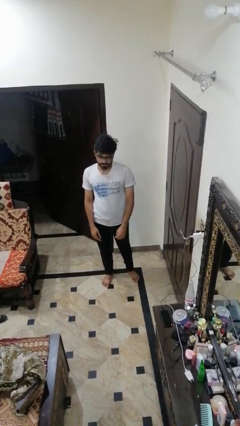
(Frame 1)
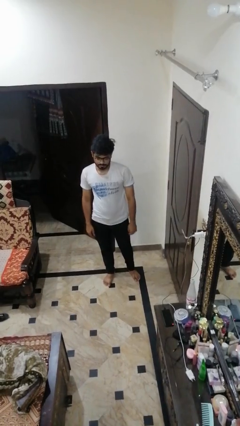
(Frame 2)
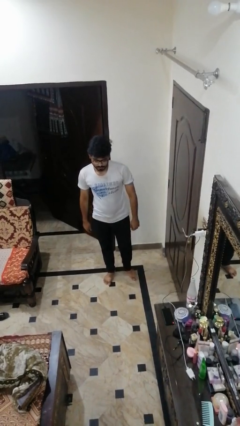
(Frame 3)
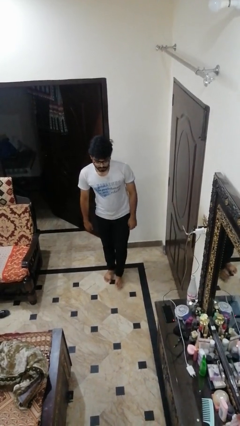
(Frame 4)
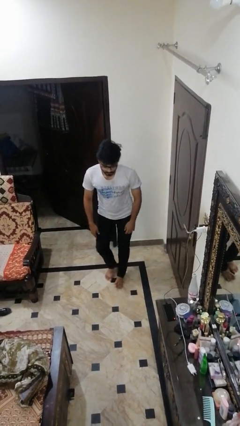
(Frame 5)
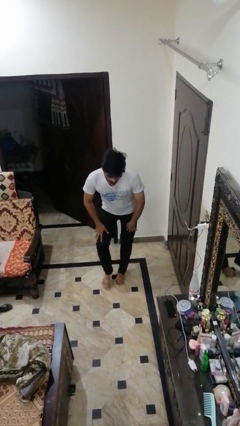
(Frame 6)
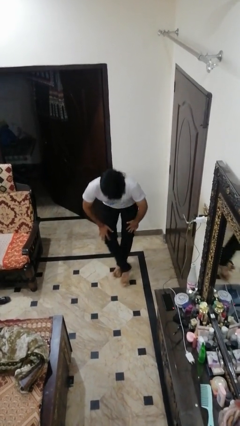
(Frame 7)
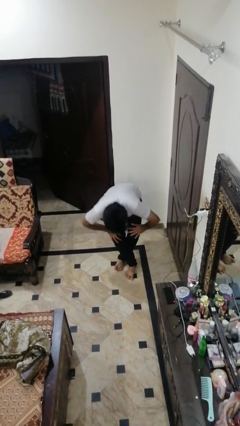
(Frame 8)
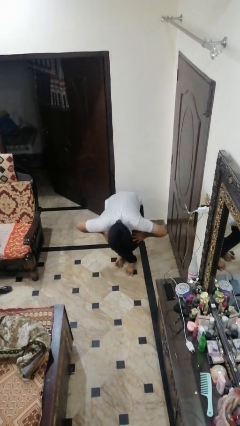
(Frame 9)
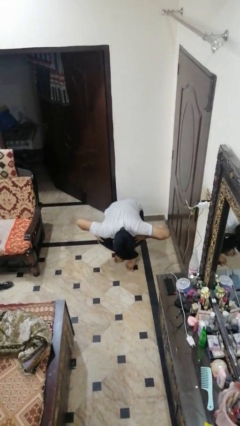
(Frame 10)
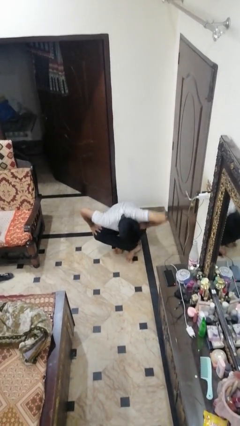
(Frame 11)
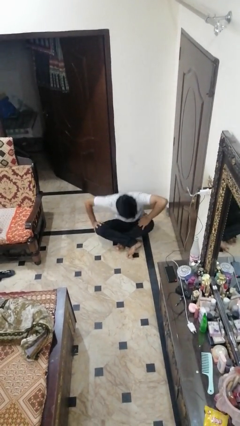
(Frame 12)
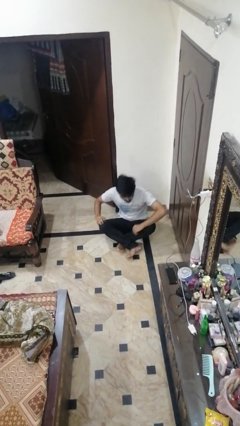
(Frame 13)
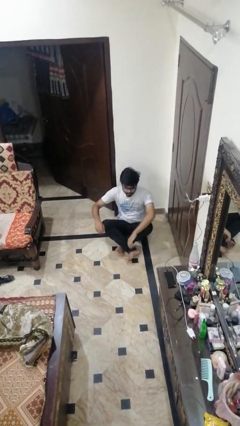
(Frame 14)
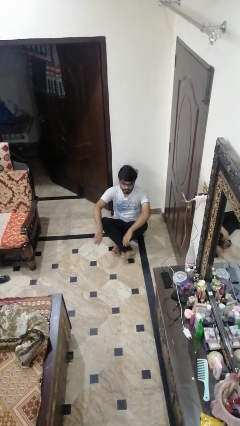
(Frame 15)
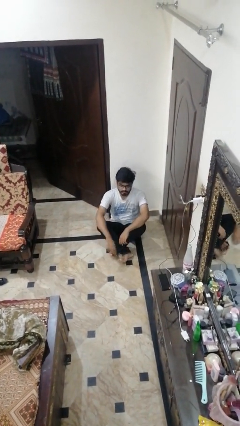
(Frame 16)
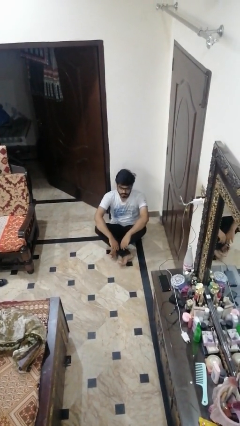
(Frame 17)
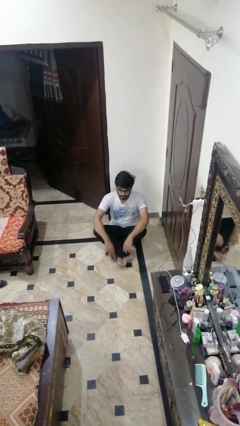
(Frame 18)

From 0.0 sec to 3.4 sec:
person sits crisscross

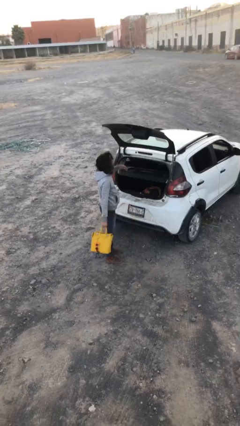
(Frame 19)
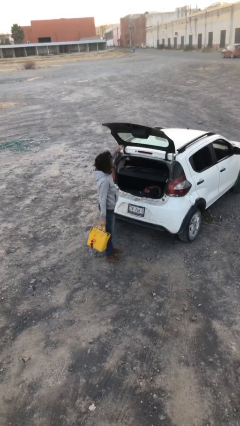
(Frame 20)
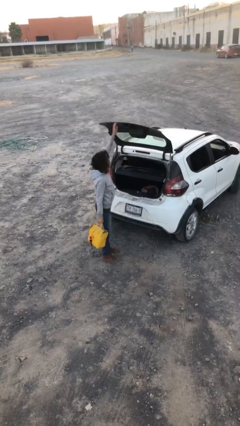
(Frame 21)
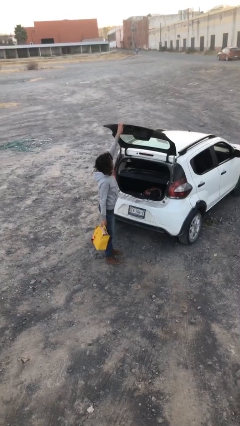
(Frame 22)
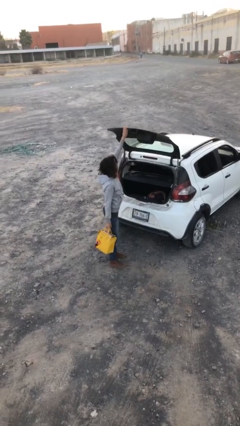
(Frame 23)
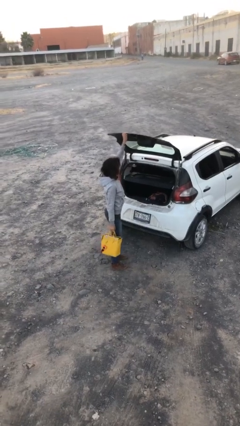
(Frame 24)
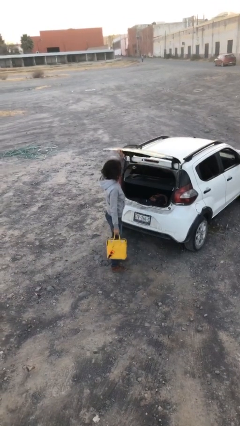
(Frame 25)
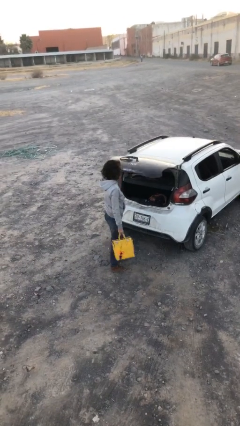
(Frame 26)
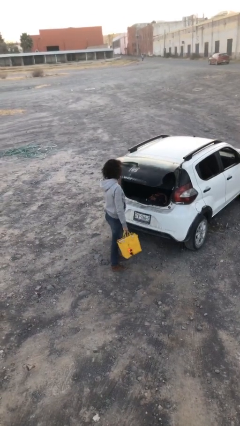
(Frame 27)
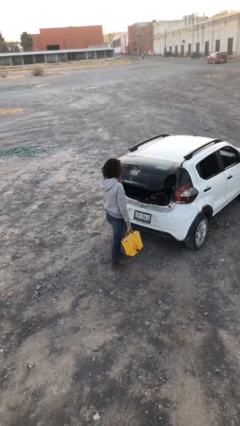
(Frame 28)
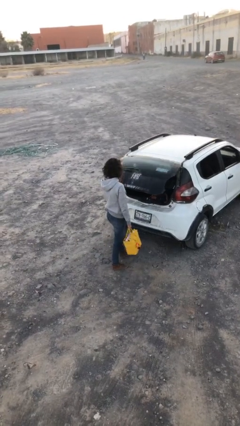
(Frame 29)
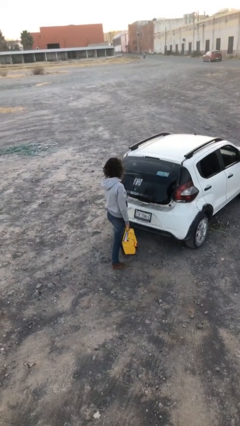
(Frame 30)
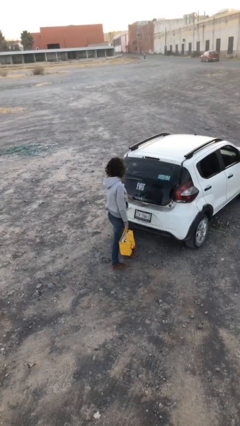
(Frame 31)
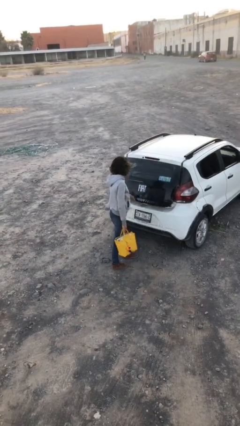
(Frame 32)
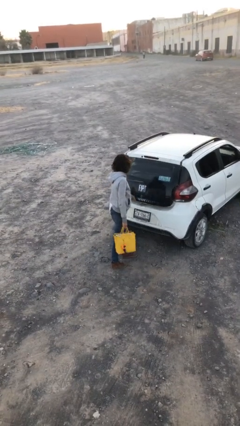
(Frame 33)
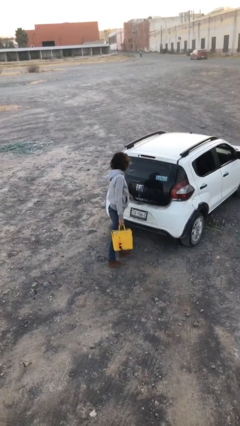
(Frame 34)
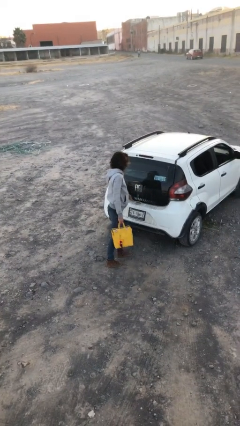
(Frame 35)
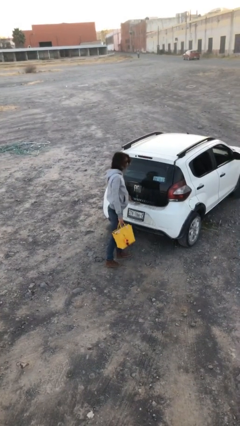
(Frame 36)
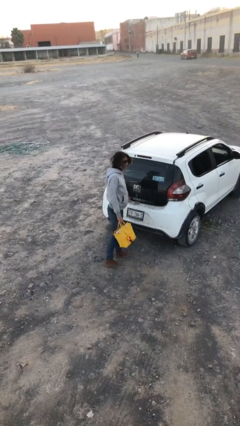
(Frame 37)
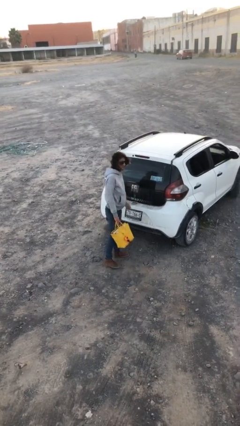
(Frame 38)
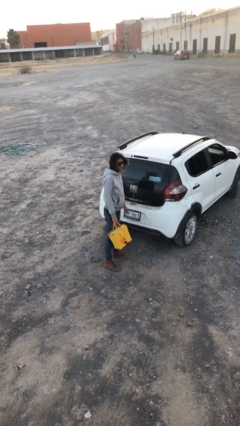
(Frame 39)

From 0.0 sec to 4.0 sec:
person closes car trunk

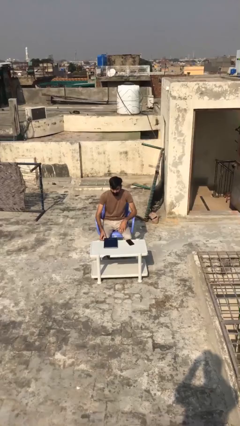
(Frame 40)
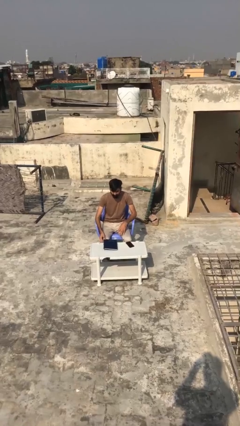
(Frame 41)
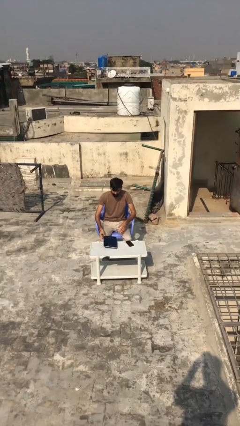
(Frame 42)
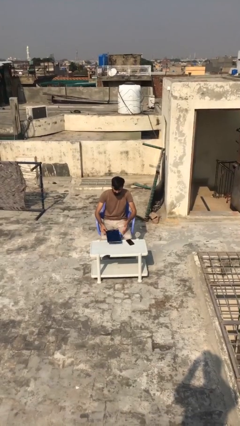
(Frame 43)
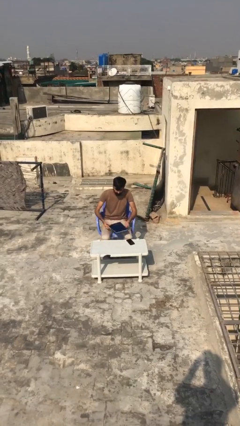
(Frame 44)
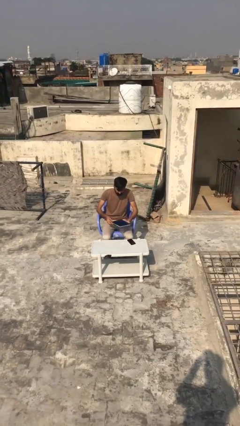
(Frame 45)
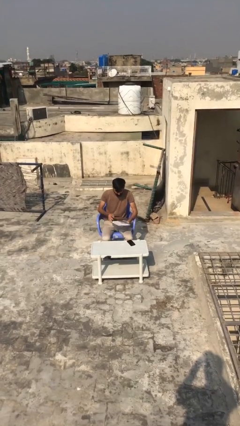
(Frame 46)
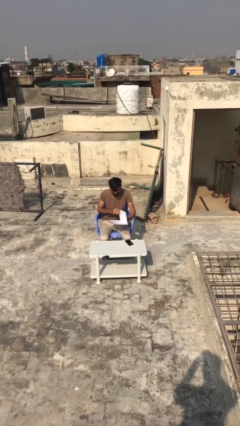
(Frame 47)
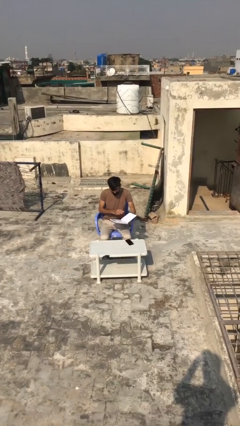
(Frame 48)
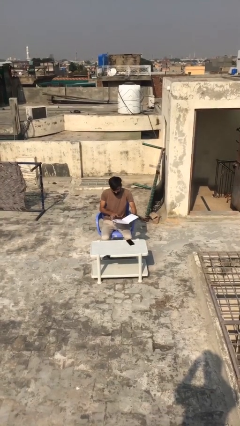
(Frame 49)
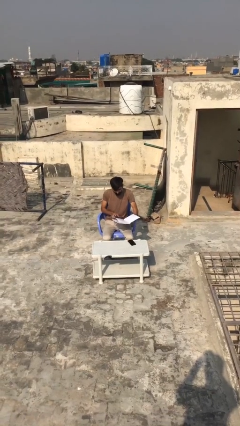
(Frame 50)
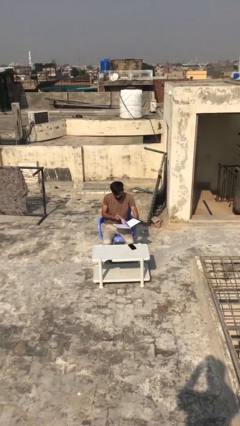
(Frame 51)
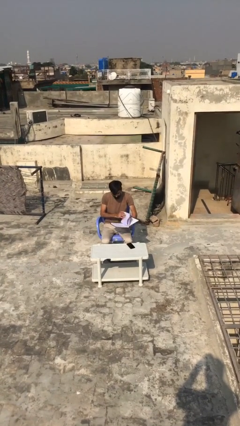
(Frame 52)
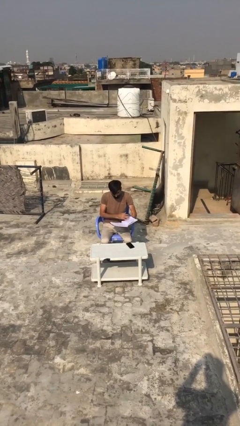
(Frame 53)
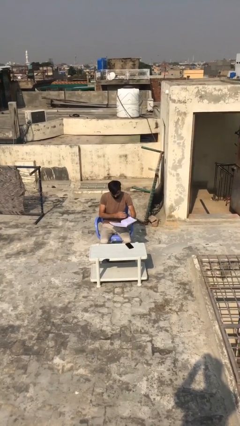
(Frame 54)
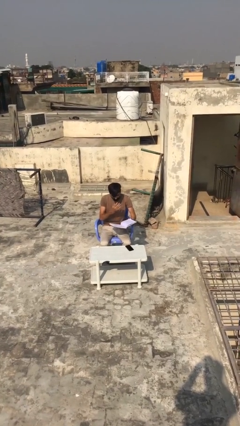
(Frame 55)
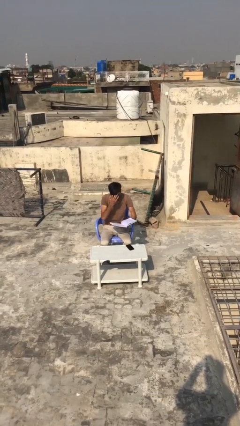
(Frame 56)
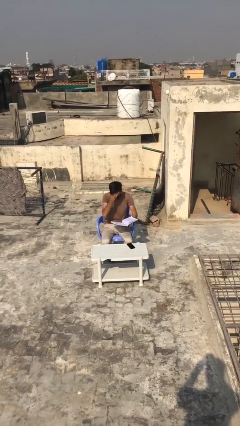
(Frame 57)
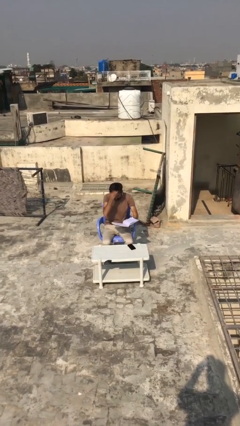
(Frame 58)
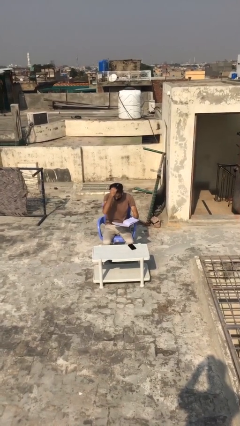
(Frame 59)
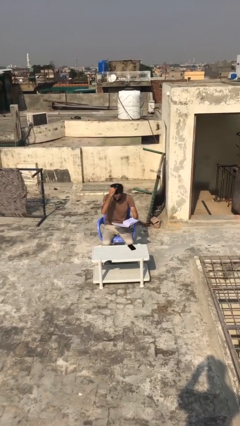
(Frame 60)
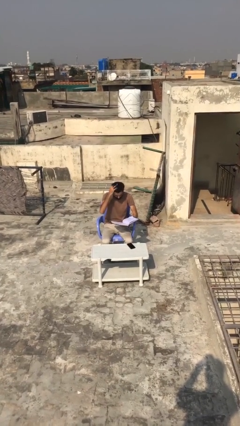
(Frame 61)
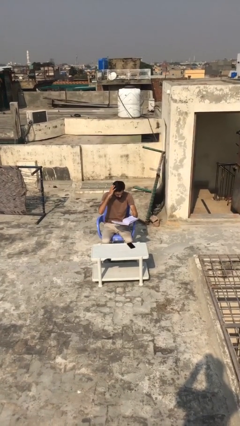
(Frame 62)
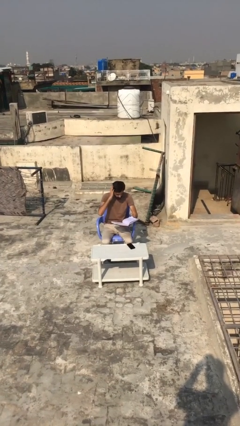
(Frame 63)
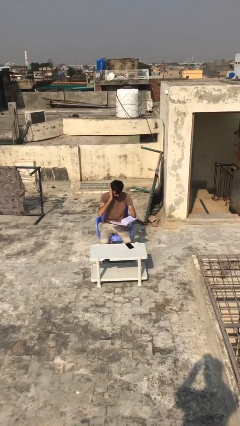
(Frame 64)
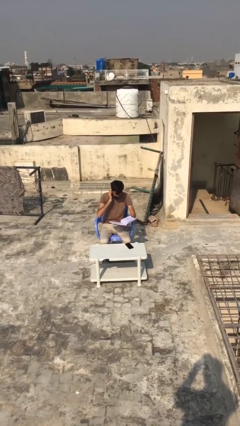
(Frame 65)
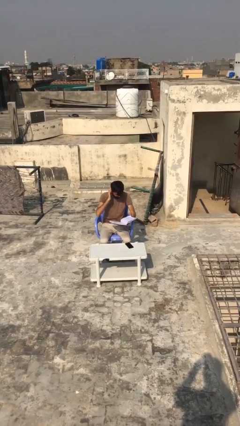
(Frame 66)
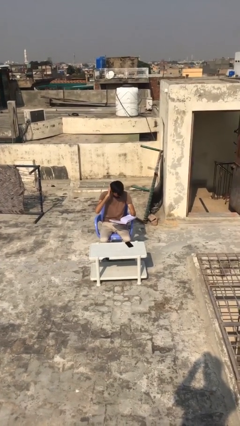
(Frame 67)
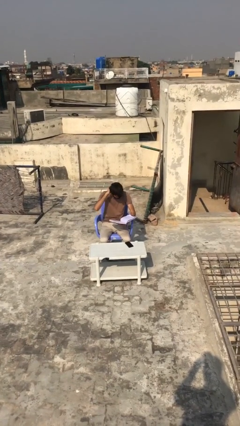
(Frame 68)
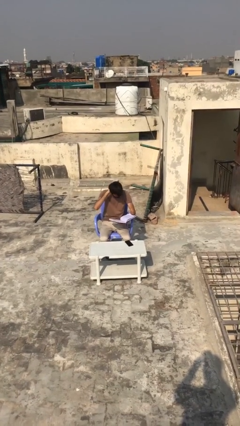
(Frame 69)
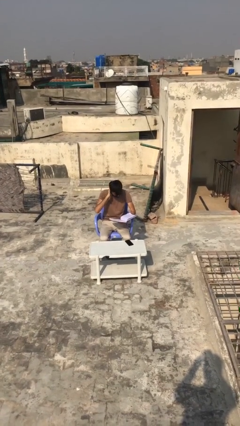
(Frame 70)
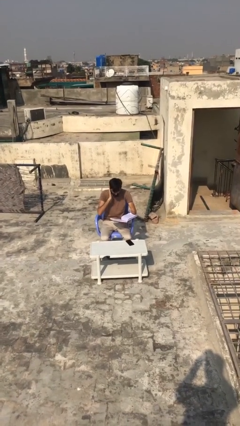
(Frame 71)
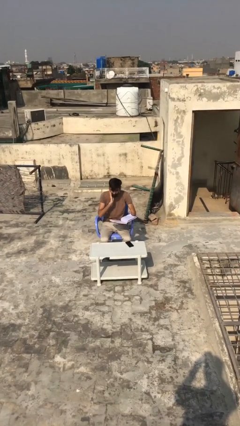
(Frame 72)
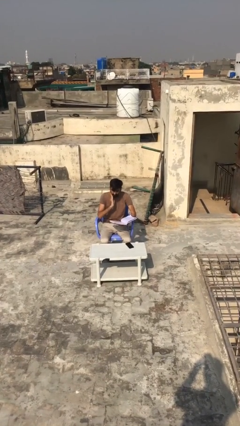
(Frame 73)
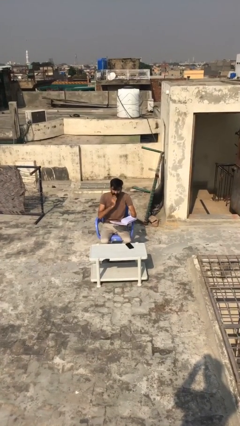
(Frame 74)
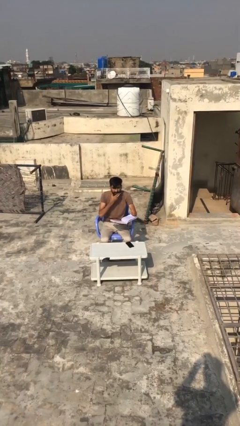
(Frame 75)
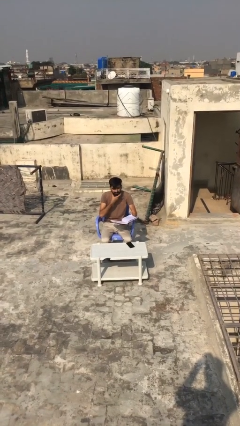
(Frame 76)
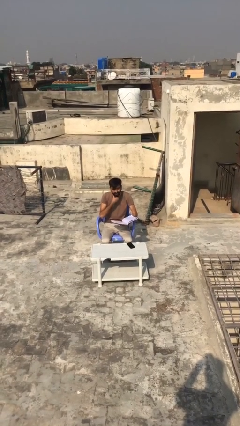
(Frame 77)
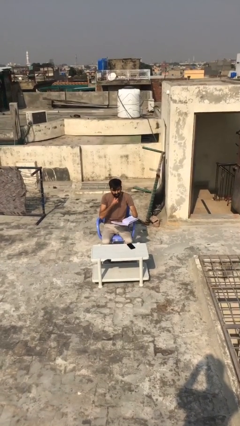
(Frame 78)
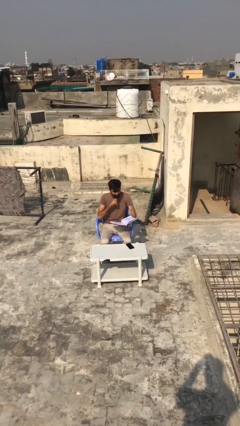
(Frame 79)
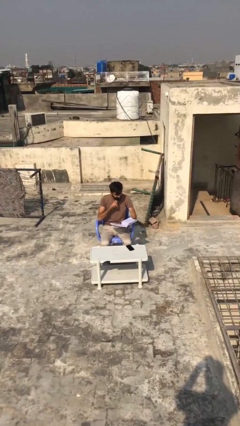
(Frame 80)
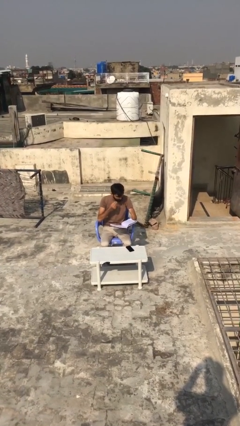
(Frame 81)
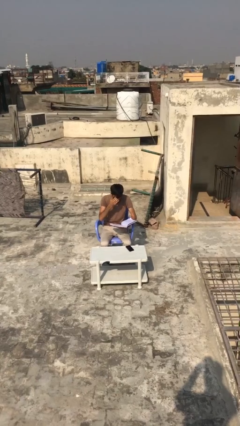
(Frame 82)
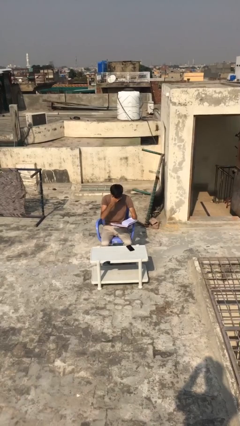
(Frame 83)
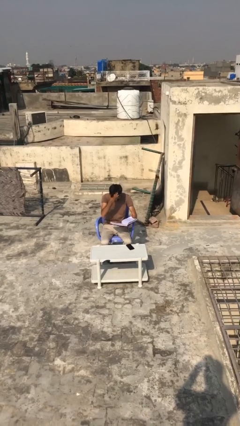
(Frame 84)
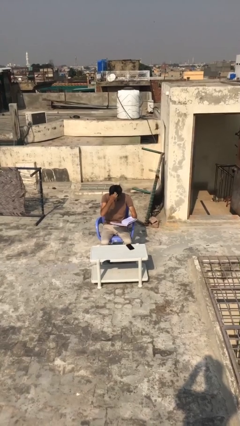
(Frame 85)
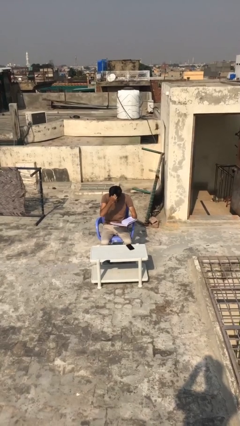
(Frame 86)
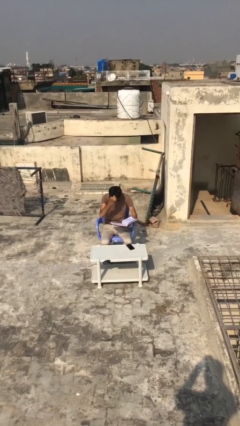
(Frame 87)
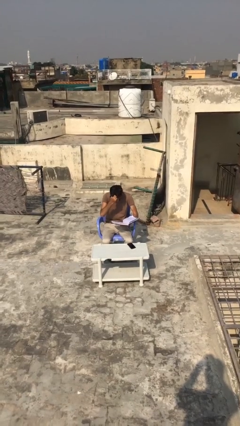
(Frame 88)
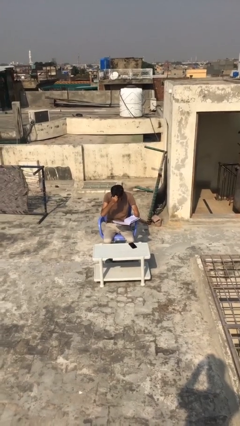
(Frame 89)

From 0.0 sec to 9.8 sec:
person reads document

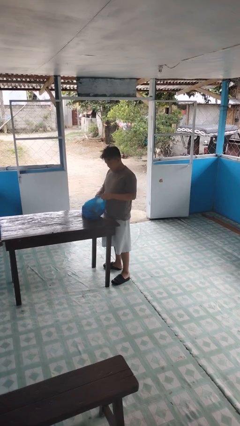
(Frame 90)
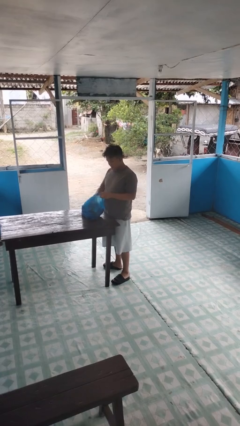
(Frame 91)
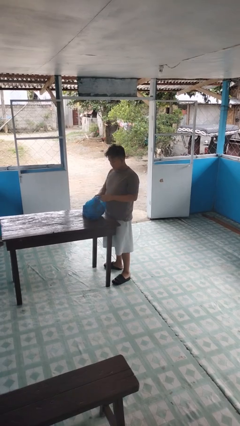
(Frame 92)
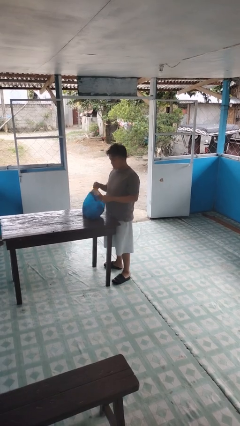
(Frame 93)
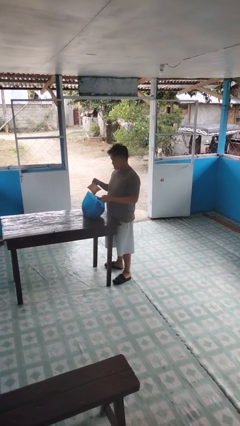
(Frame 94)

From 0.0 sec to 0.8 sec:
person takes object from bag
